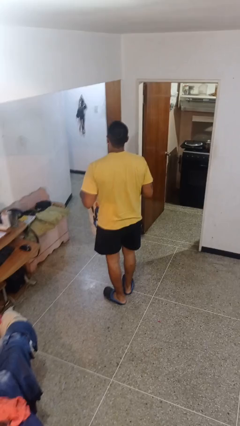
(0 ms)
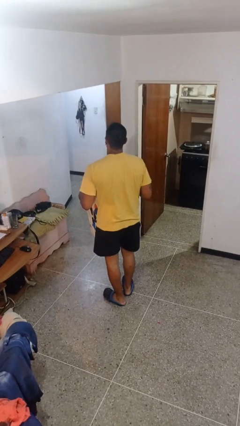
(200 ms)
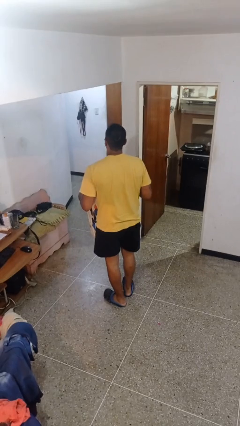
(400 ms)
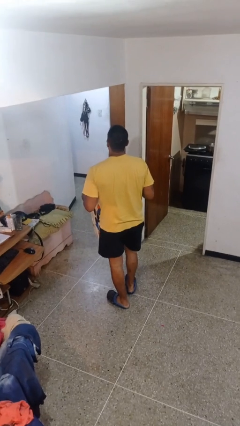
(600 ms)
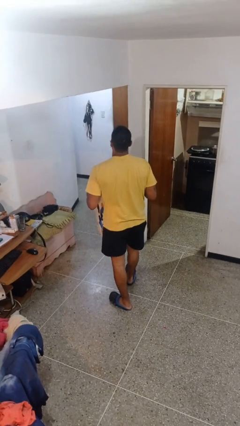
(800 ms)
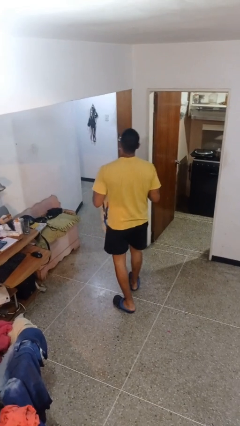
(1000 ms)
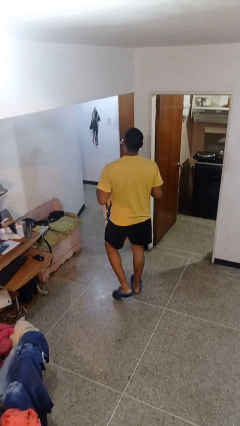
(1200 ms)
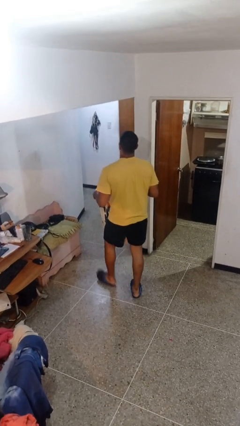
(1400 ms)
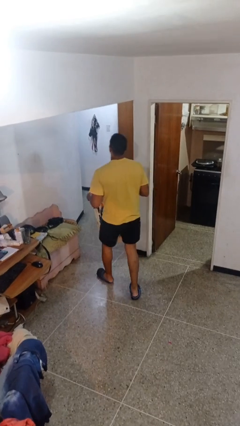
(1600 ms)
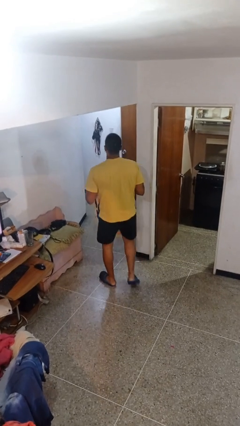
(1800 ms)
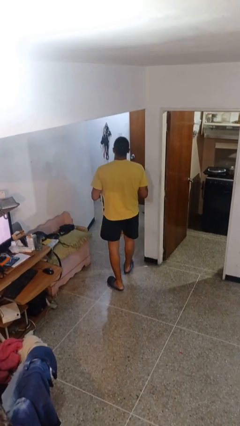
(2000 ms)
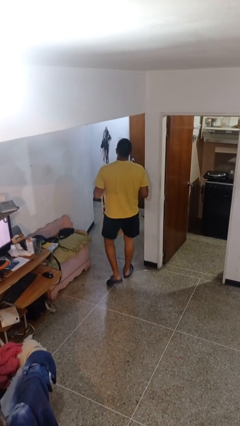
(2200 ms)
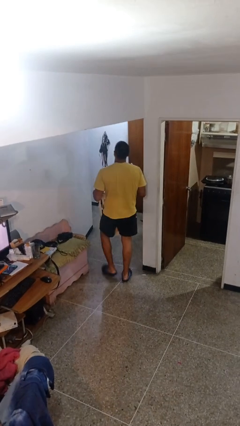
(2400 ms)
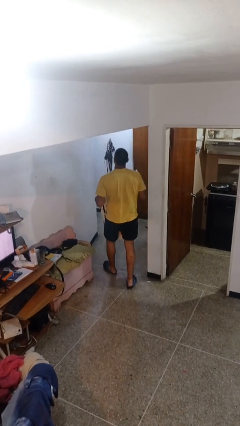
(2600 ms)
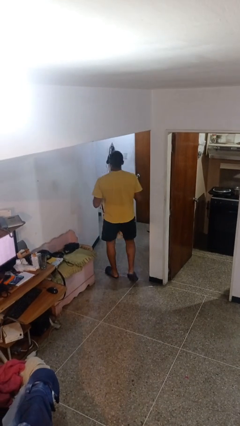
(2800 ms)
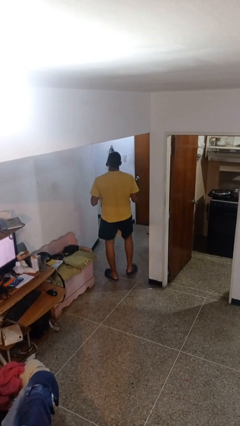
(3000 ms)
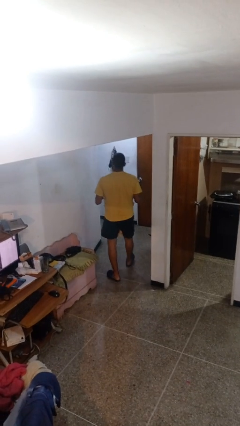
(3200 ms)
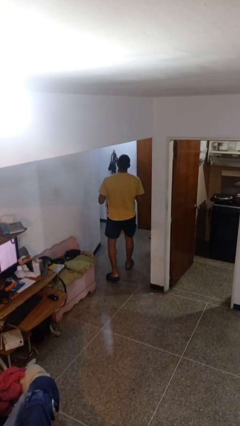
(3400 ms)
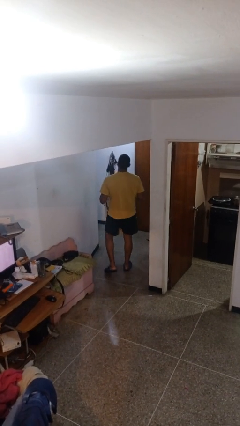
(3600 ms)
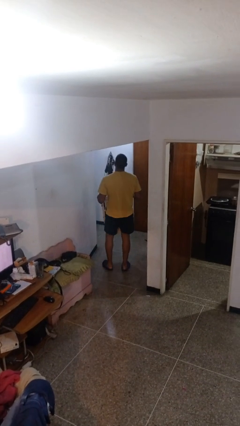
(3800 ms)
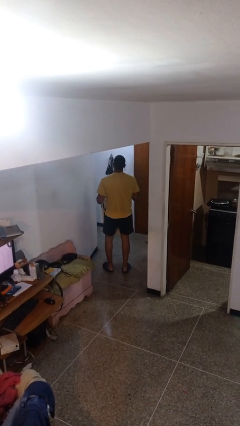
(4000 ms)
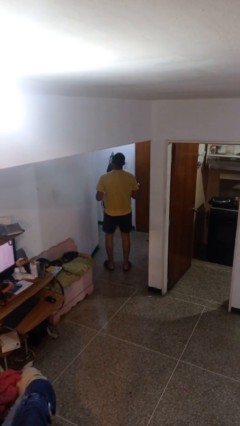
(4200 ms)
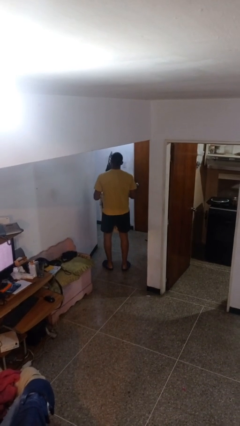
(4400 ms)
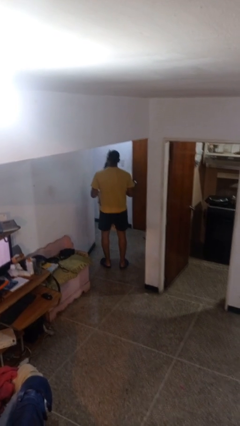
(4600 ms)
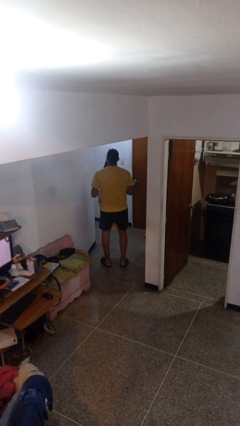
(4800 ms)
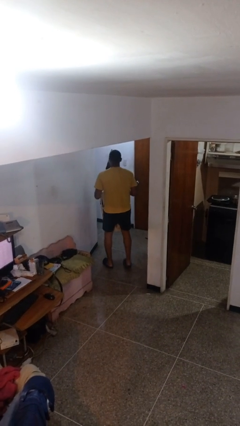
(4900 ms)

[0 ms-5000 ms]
person carries laundry basket

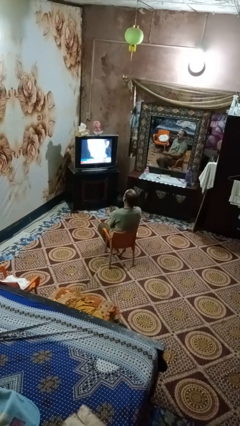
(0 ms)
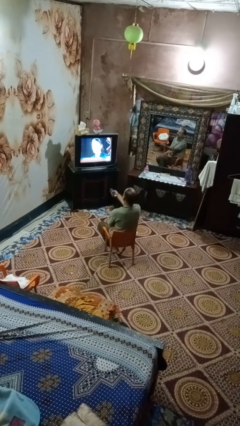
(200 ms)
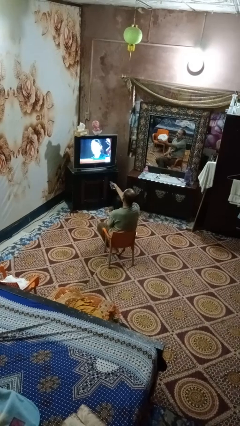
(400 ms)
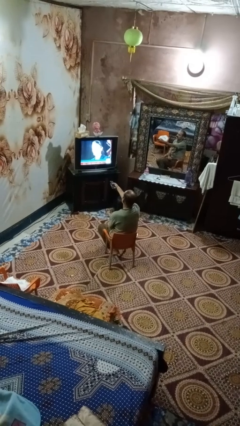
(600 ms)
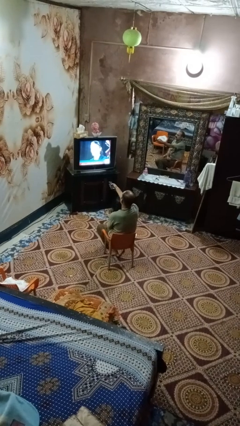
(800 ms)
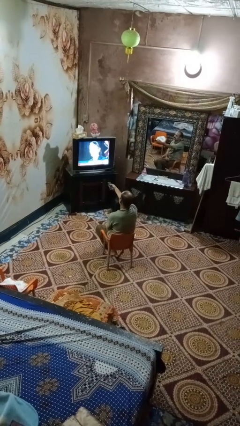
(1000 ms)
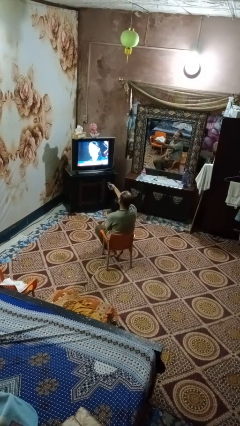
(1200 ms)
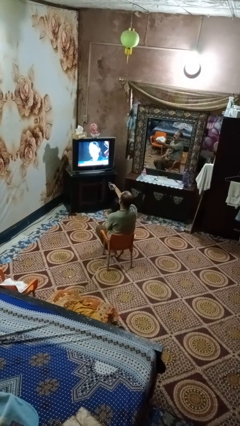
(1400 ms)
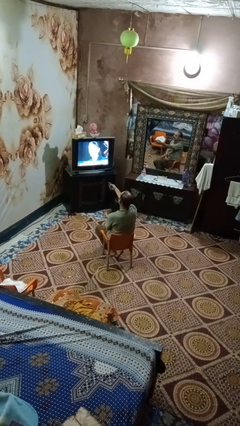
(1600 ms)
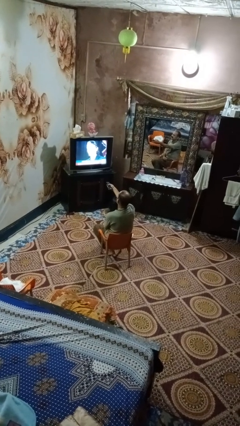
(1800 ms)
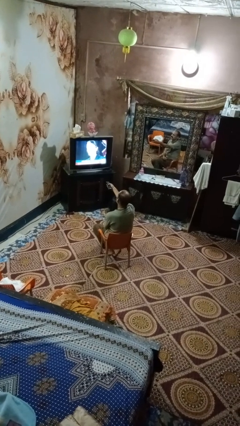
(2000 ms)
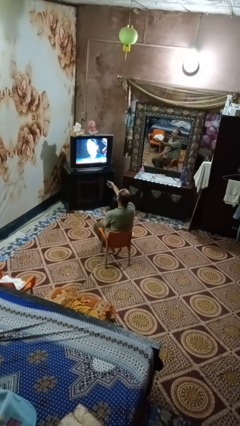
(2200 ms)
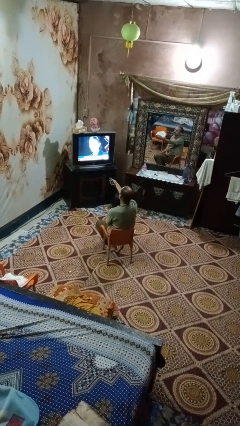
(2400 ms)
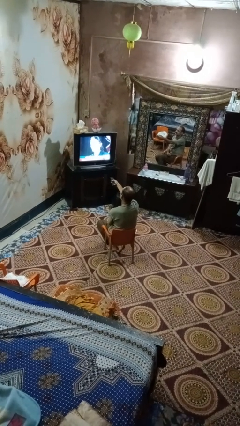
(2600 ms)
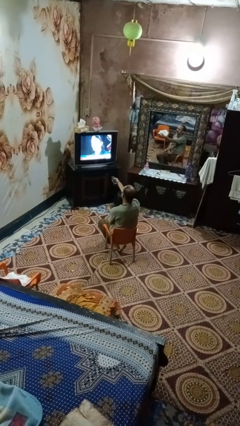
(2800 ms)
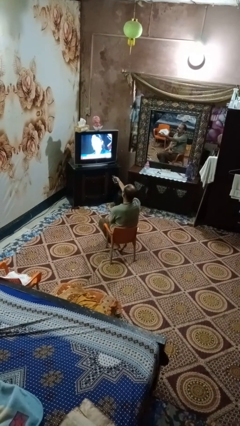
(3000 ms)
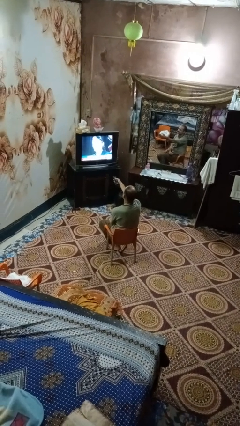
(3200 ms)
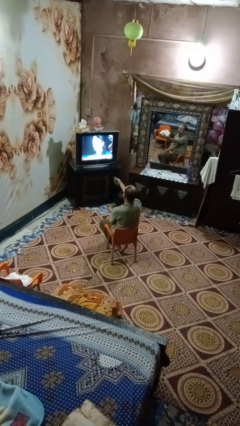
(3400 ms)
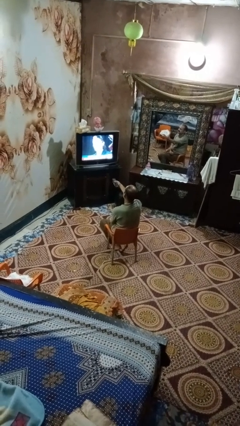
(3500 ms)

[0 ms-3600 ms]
person uses television remote

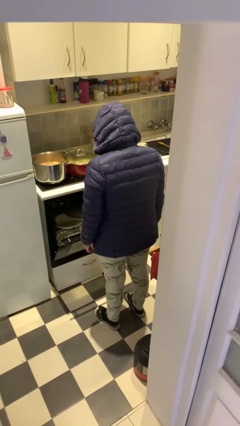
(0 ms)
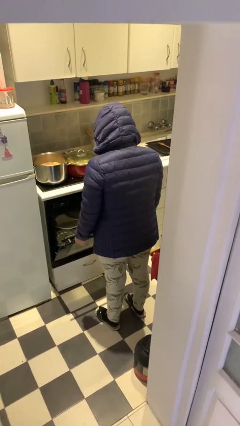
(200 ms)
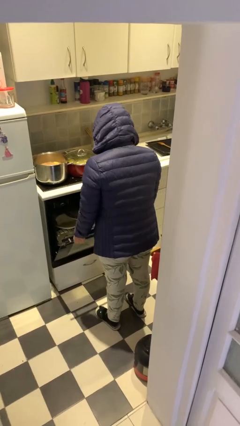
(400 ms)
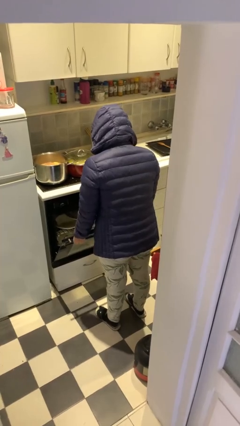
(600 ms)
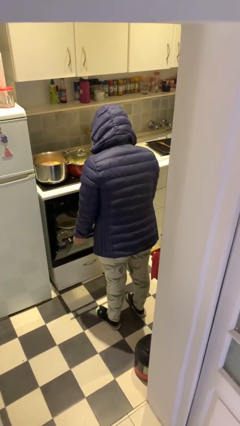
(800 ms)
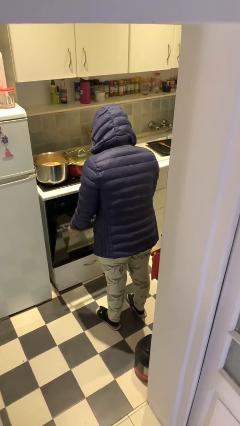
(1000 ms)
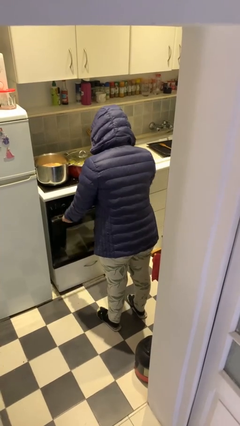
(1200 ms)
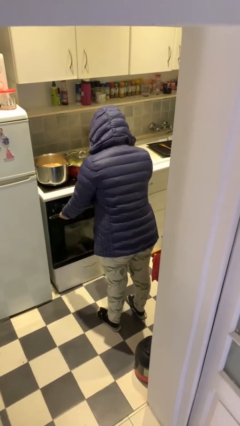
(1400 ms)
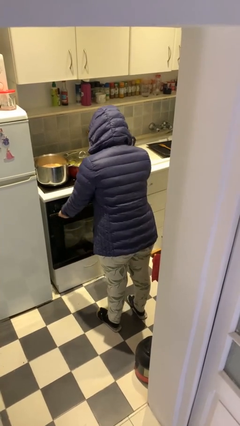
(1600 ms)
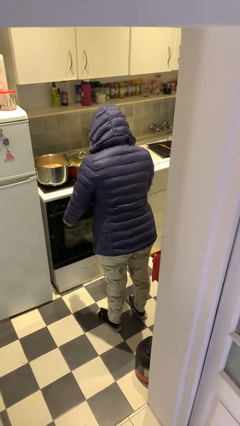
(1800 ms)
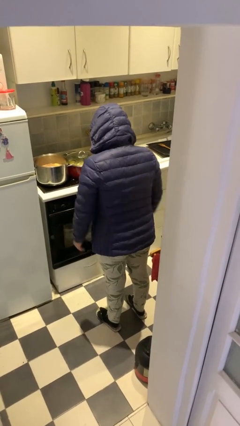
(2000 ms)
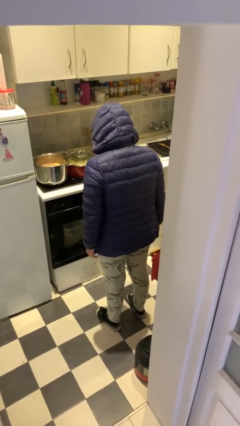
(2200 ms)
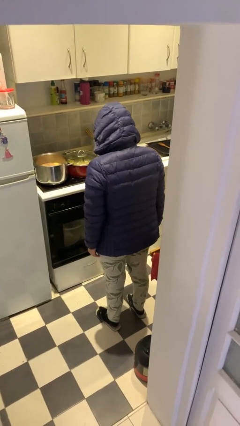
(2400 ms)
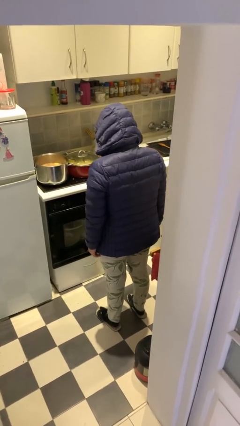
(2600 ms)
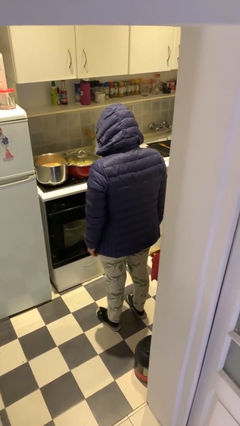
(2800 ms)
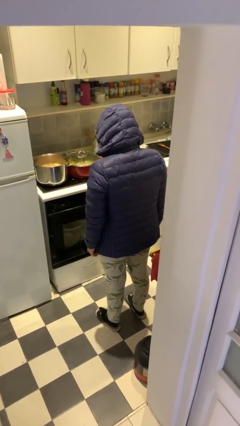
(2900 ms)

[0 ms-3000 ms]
person closes dishwasher

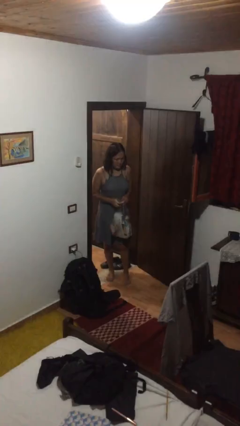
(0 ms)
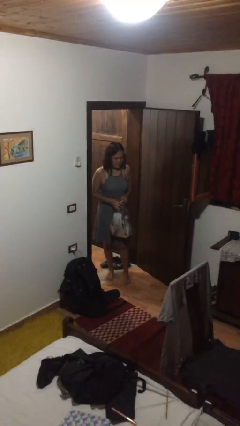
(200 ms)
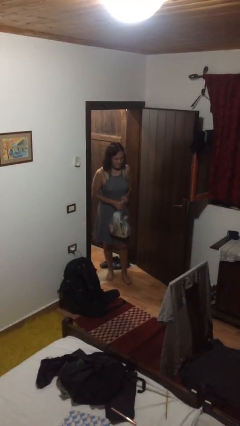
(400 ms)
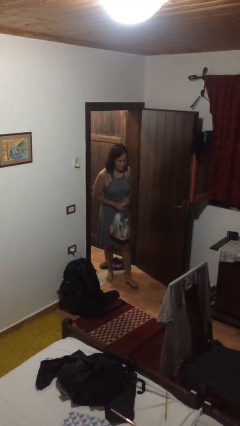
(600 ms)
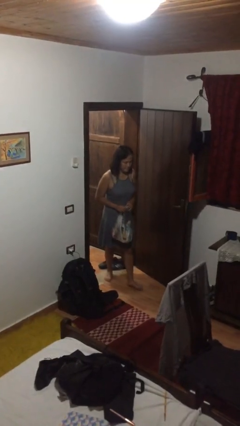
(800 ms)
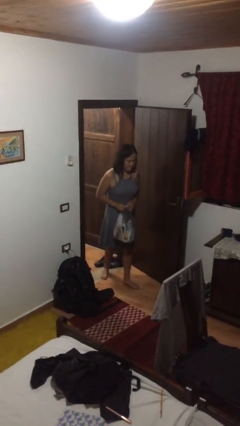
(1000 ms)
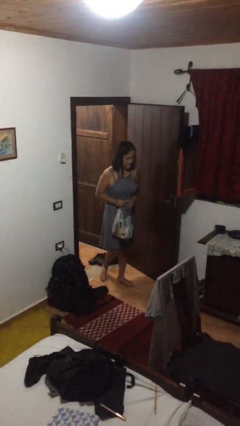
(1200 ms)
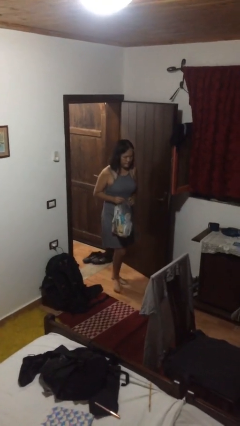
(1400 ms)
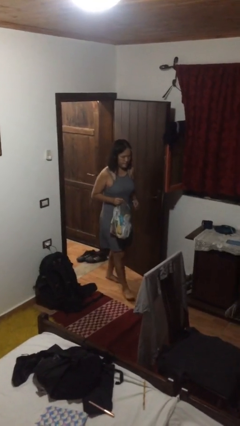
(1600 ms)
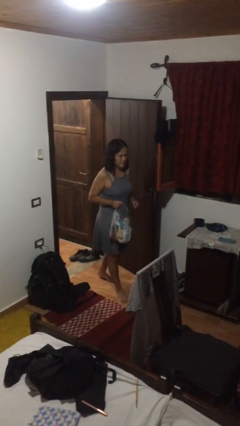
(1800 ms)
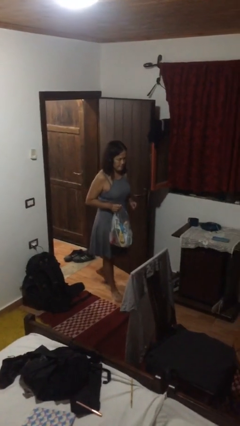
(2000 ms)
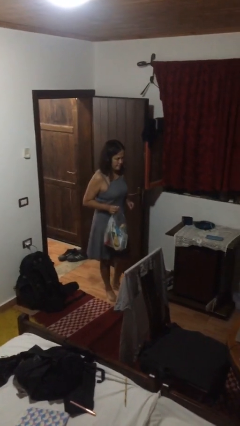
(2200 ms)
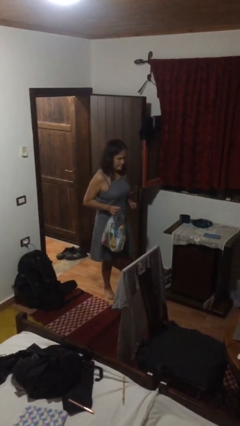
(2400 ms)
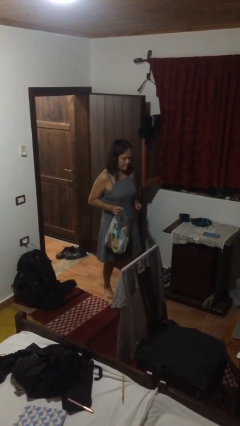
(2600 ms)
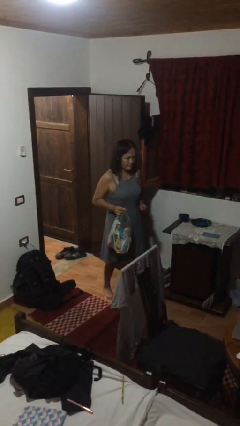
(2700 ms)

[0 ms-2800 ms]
person carries groceries

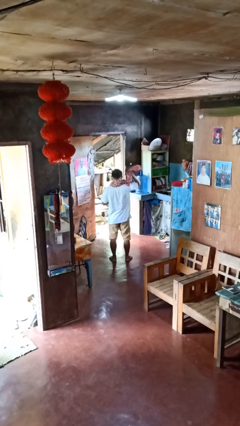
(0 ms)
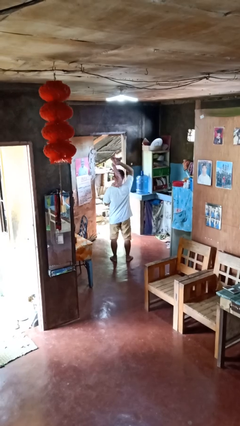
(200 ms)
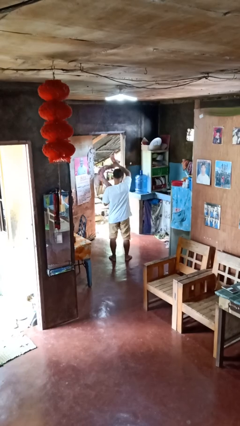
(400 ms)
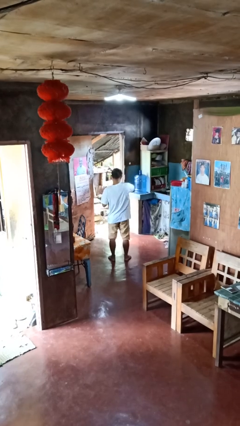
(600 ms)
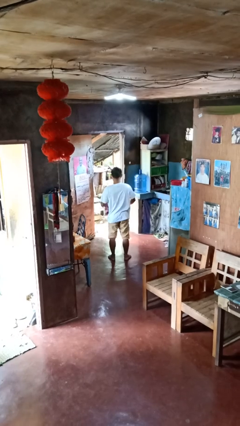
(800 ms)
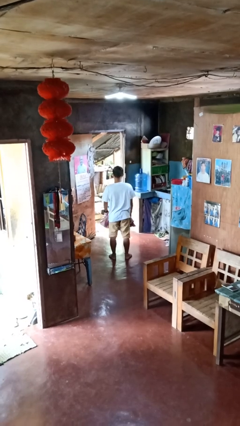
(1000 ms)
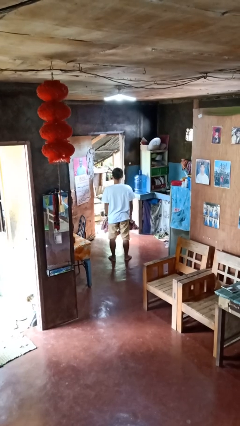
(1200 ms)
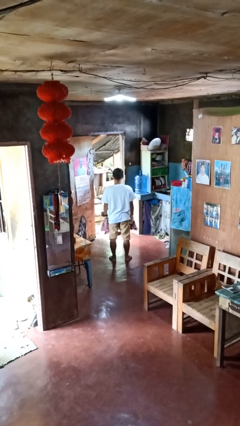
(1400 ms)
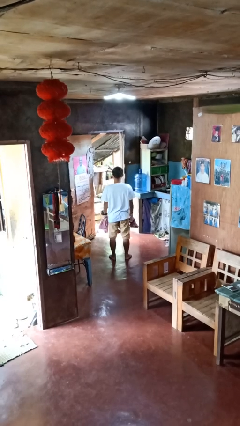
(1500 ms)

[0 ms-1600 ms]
person takes off scarf

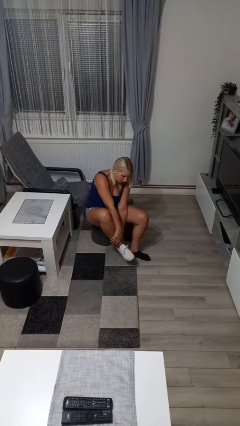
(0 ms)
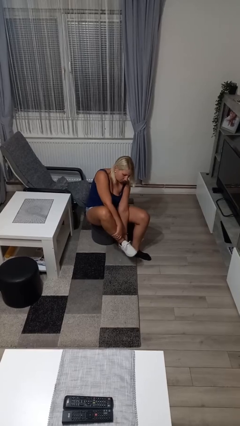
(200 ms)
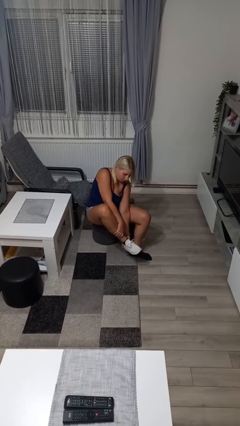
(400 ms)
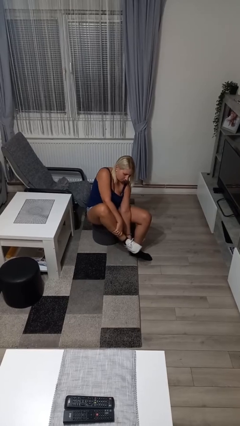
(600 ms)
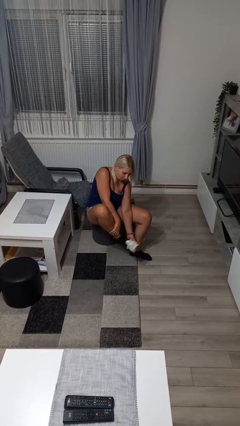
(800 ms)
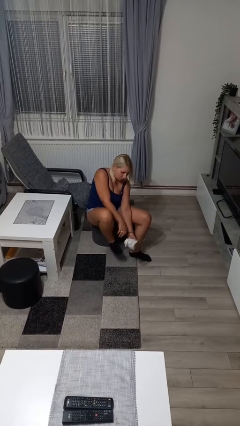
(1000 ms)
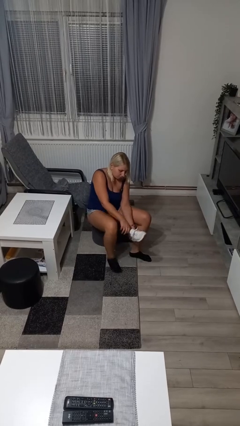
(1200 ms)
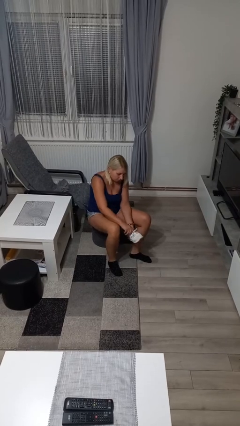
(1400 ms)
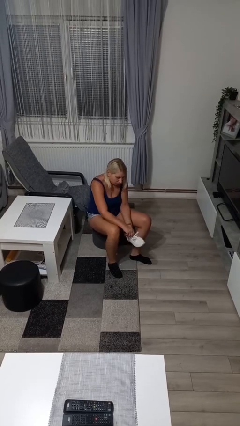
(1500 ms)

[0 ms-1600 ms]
person takes off shoes
